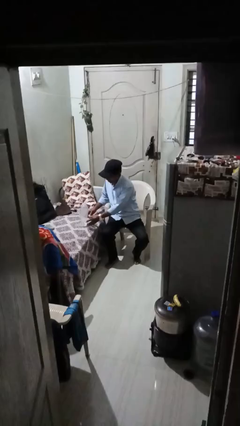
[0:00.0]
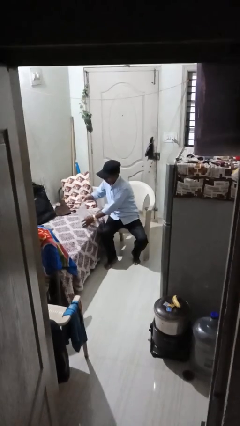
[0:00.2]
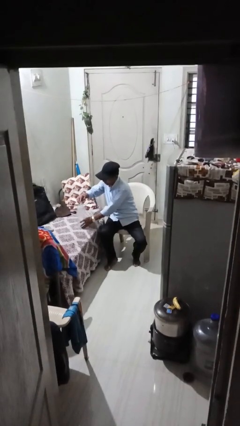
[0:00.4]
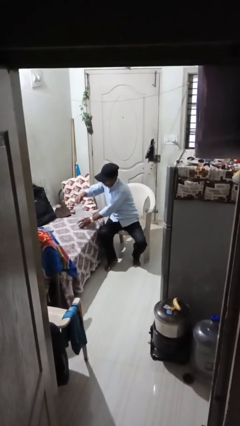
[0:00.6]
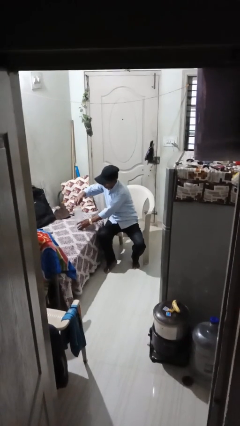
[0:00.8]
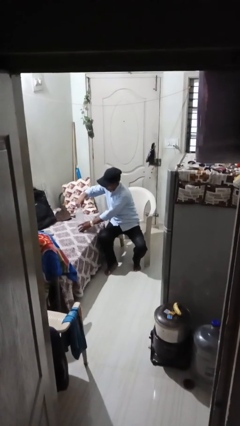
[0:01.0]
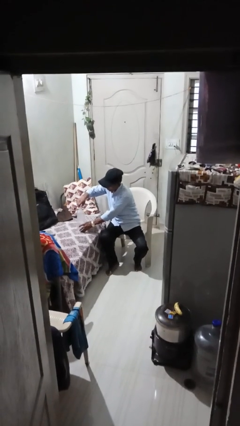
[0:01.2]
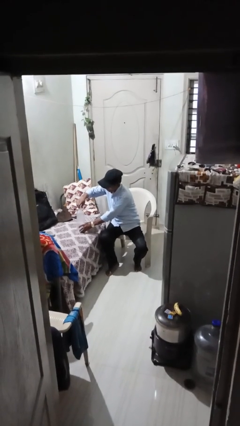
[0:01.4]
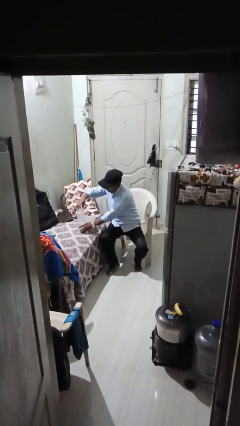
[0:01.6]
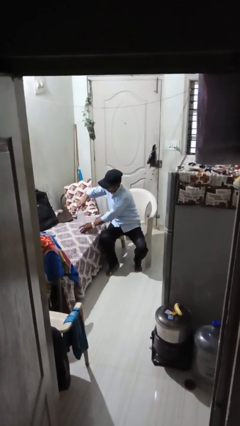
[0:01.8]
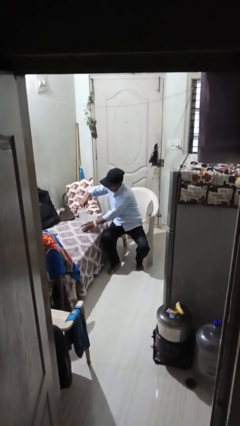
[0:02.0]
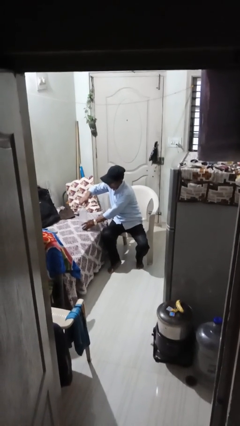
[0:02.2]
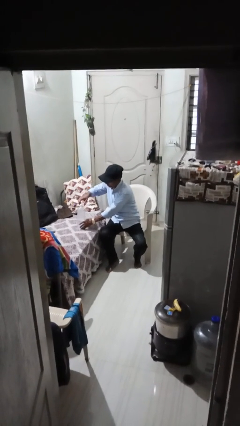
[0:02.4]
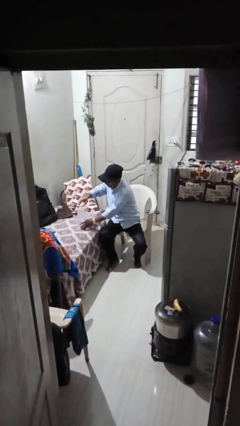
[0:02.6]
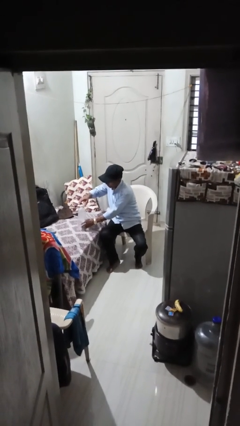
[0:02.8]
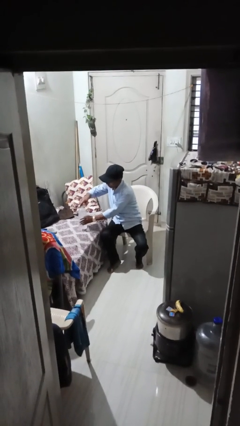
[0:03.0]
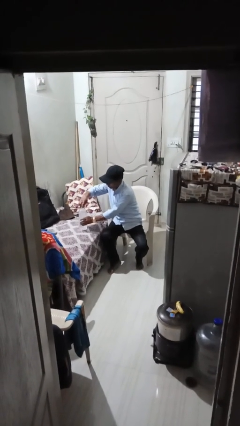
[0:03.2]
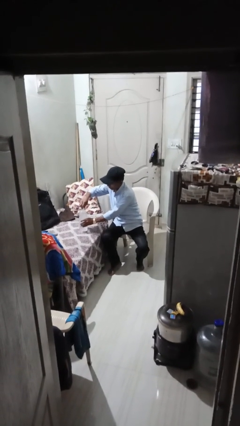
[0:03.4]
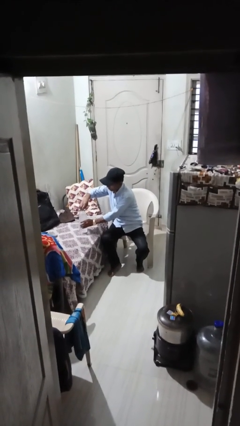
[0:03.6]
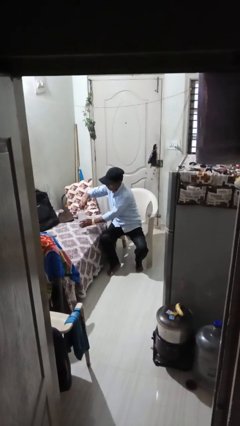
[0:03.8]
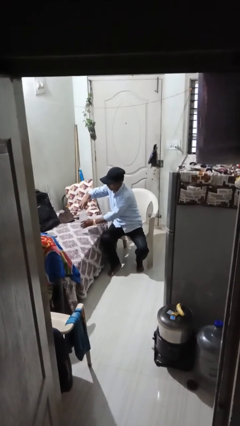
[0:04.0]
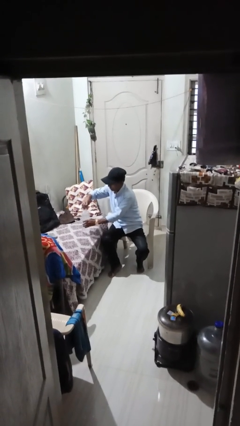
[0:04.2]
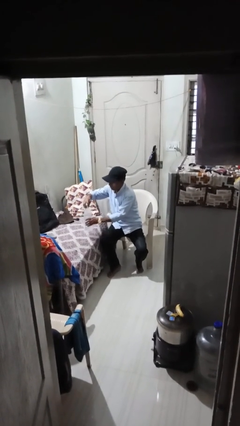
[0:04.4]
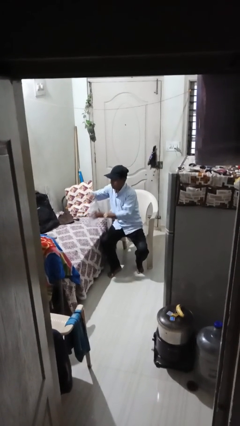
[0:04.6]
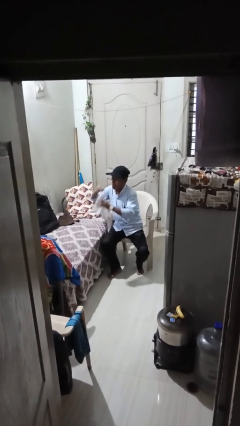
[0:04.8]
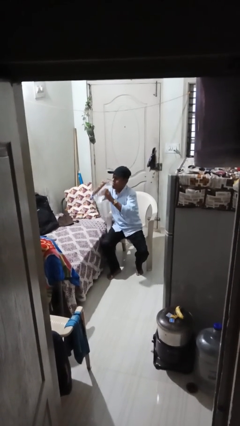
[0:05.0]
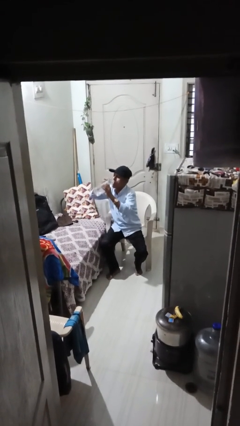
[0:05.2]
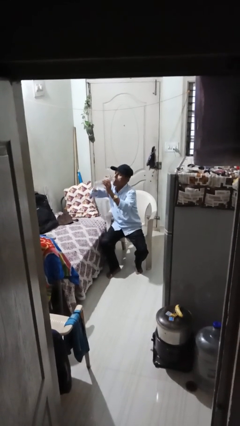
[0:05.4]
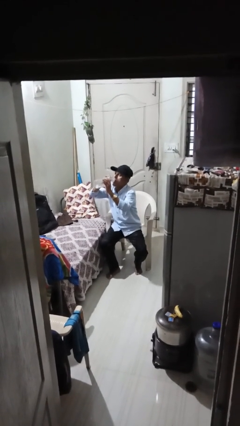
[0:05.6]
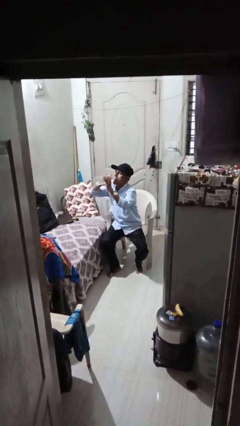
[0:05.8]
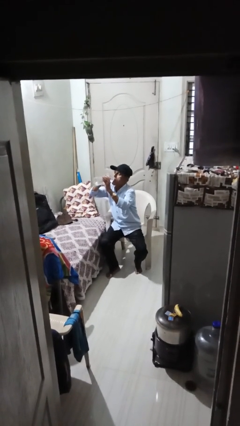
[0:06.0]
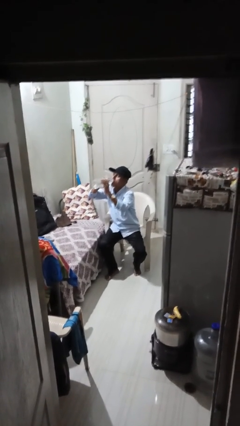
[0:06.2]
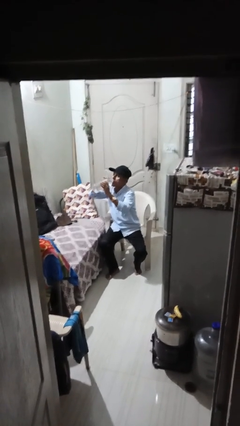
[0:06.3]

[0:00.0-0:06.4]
person drinks from bottle

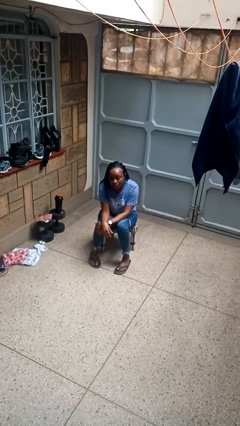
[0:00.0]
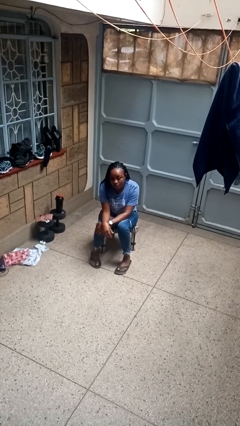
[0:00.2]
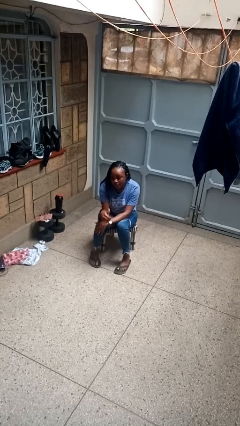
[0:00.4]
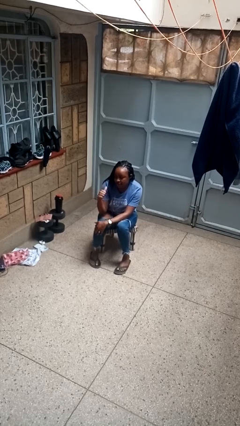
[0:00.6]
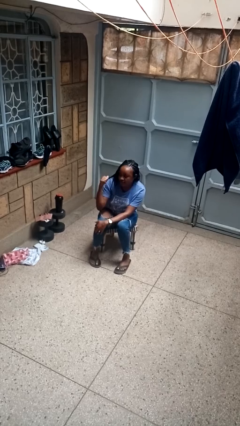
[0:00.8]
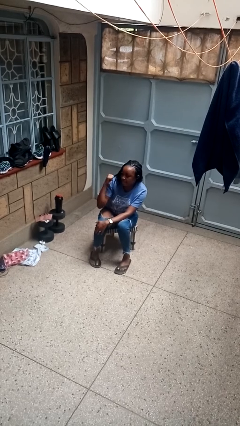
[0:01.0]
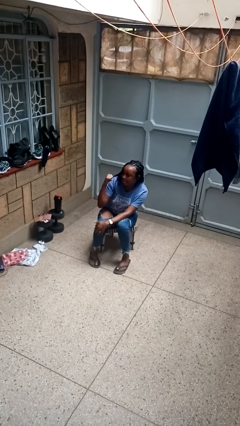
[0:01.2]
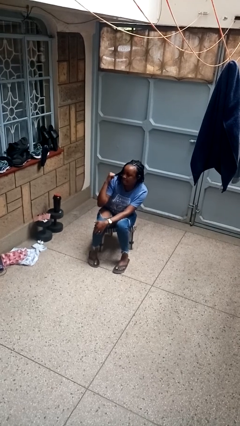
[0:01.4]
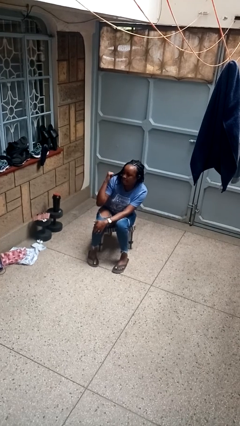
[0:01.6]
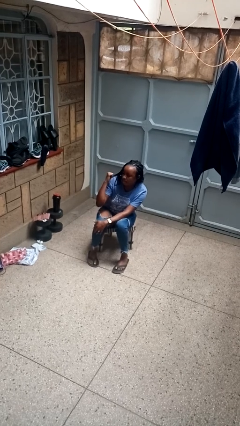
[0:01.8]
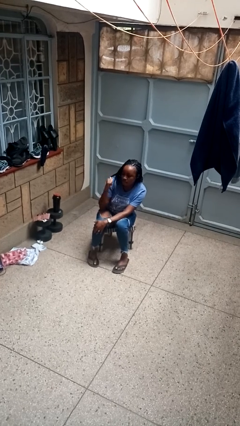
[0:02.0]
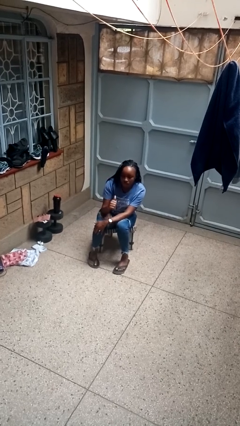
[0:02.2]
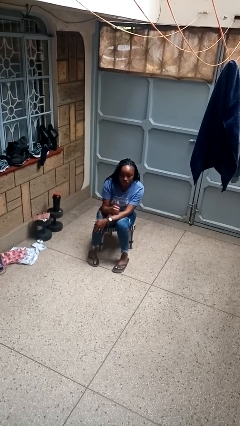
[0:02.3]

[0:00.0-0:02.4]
person gestures behind me

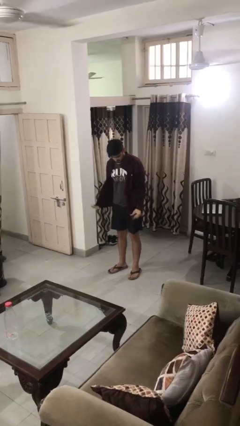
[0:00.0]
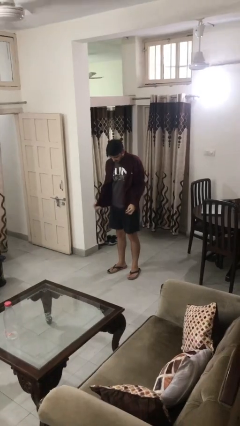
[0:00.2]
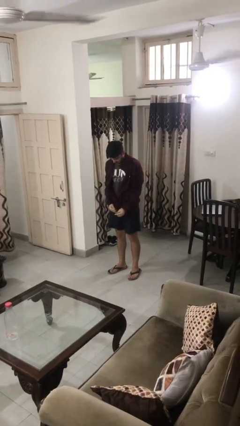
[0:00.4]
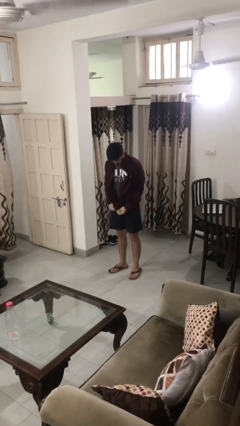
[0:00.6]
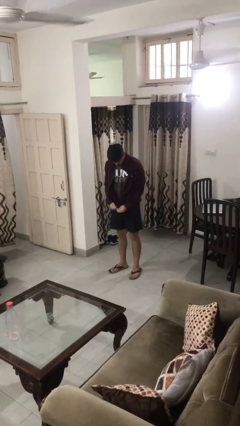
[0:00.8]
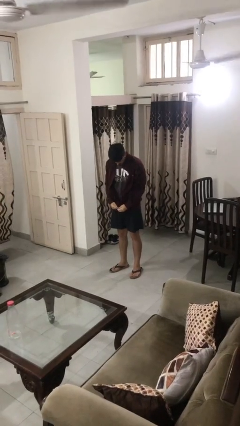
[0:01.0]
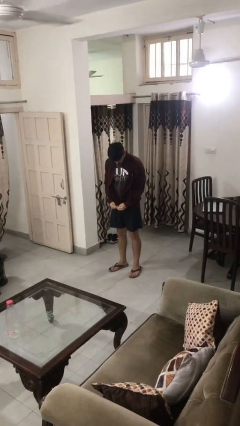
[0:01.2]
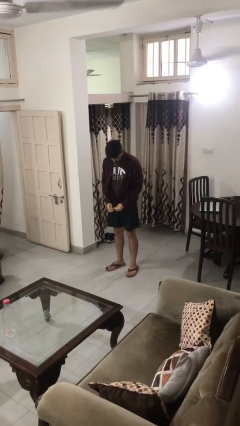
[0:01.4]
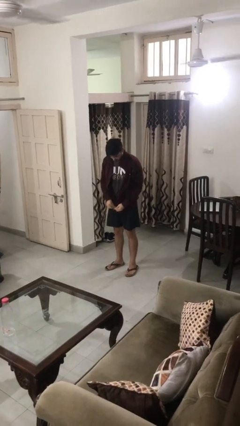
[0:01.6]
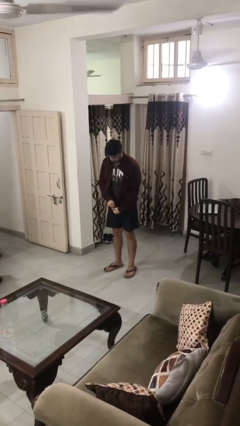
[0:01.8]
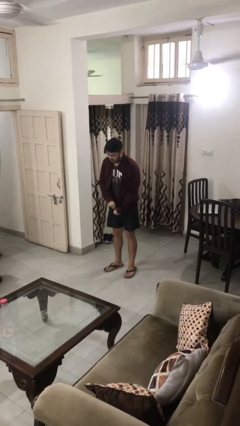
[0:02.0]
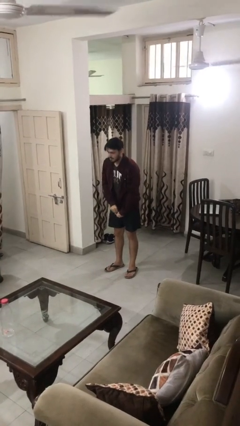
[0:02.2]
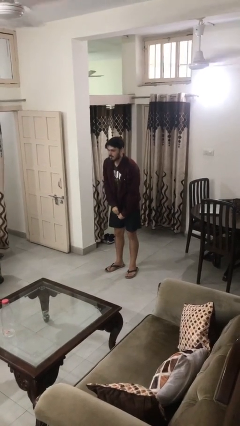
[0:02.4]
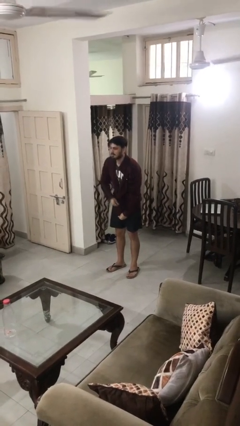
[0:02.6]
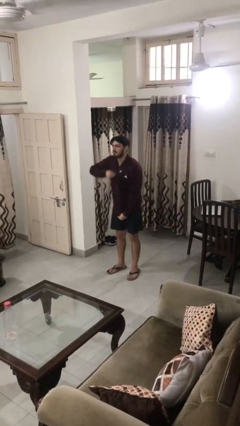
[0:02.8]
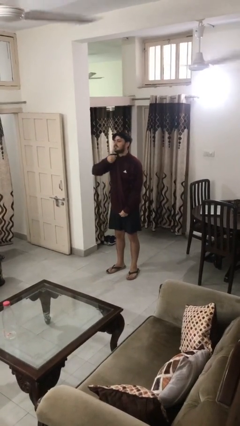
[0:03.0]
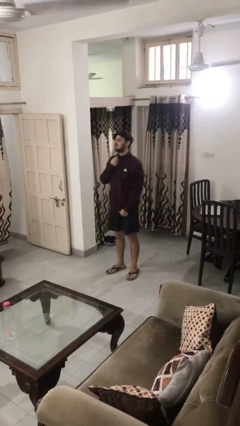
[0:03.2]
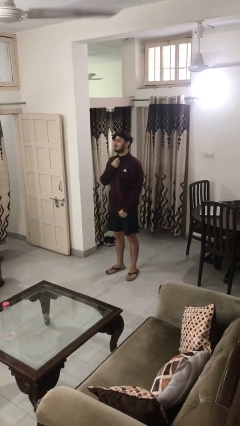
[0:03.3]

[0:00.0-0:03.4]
person zips up jacket

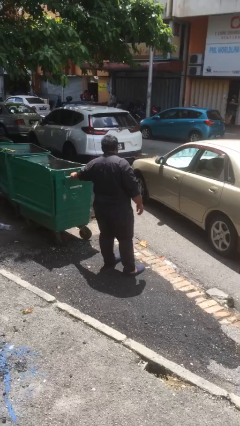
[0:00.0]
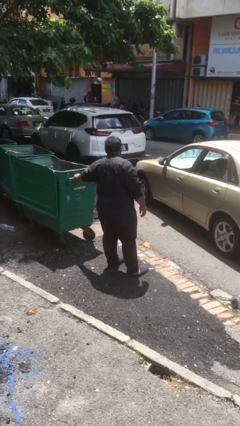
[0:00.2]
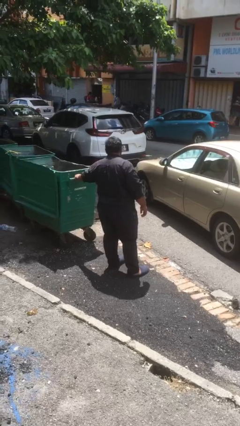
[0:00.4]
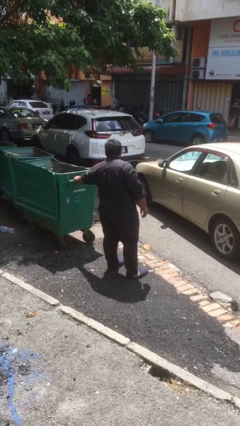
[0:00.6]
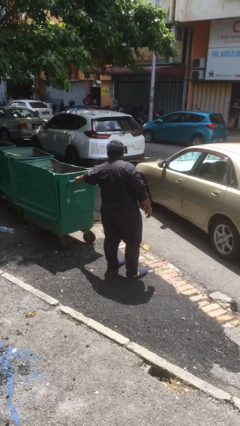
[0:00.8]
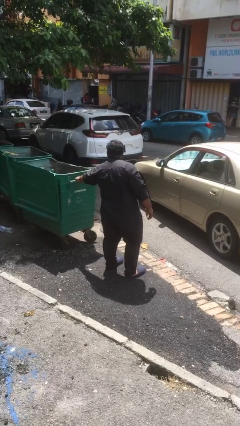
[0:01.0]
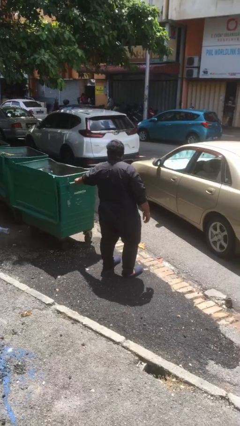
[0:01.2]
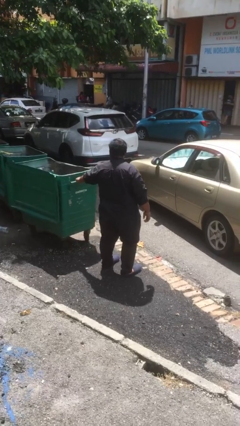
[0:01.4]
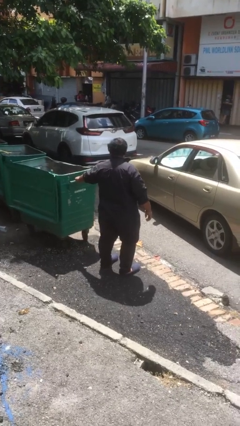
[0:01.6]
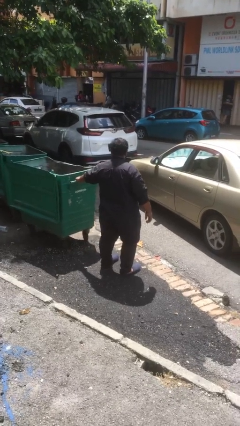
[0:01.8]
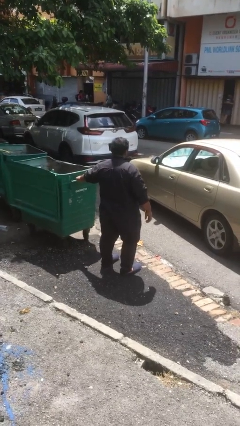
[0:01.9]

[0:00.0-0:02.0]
person pulls wheeled trashcan

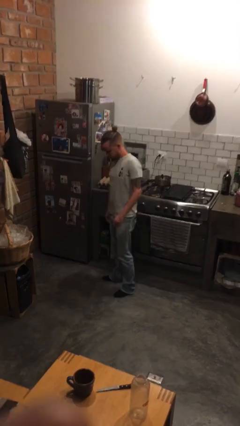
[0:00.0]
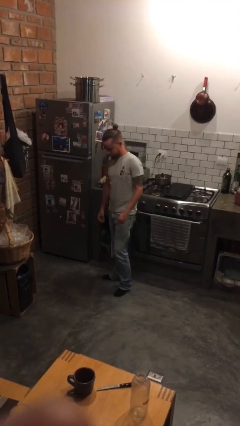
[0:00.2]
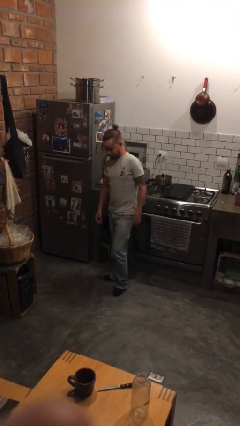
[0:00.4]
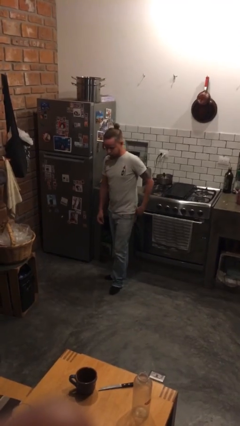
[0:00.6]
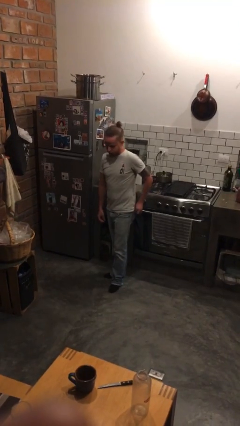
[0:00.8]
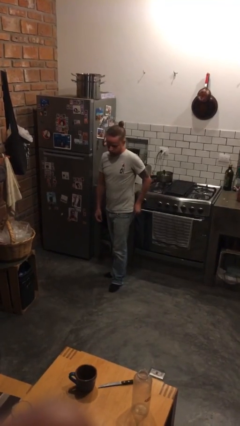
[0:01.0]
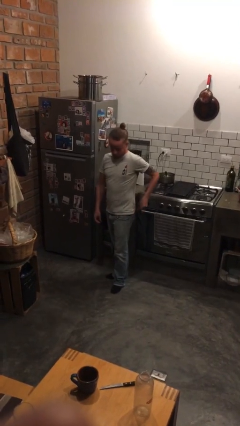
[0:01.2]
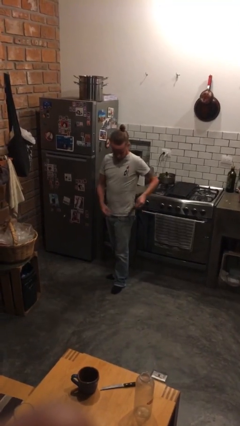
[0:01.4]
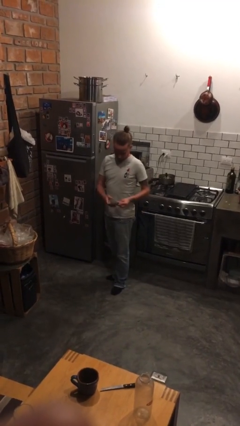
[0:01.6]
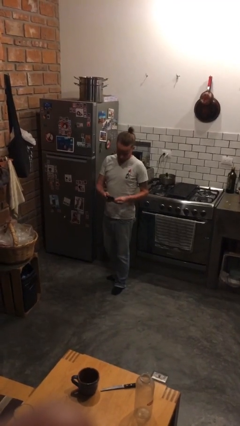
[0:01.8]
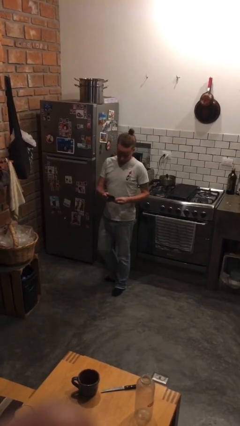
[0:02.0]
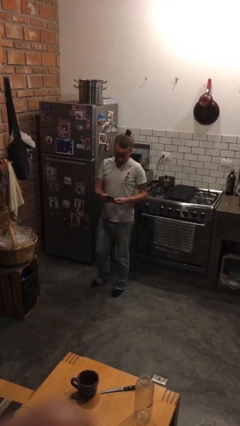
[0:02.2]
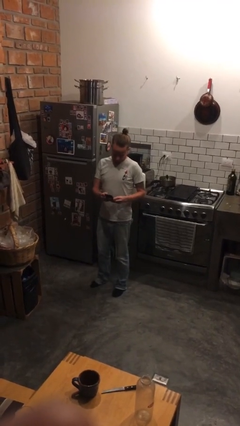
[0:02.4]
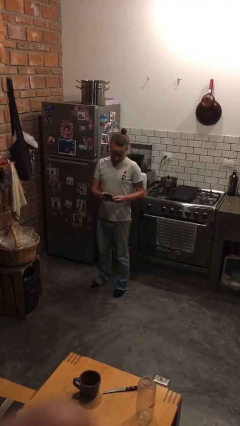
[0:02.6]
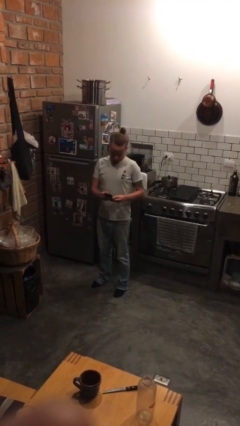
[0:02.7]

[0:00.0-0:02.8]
person takes phone from pocket

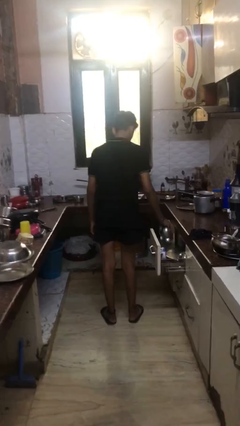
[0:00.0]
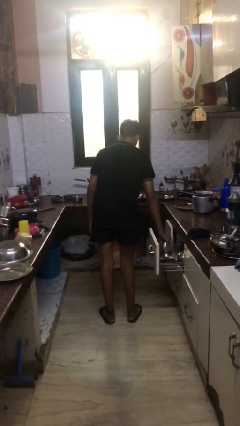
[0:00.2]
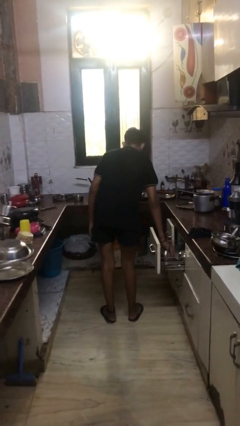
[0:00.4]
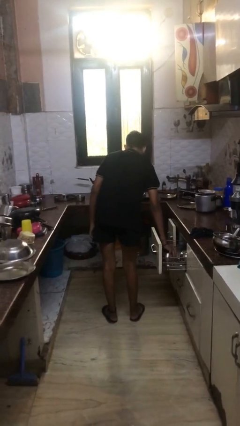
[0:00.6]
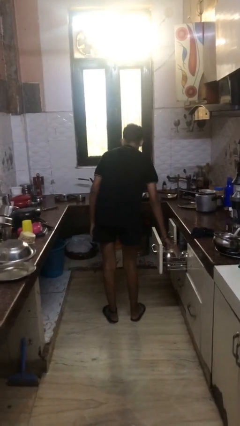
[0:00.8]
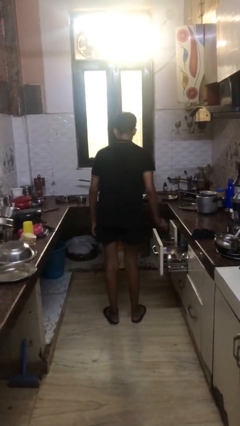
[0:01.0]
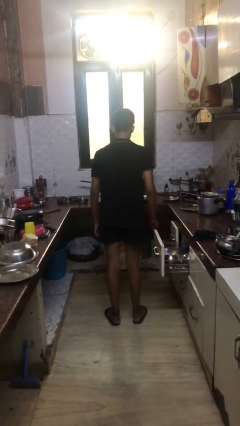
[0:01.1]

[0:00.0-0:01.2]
person puts object into kitchen drawer
